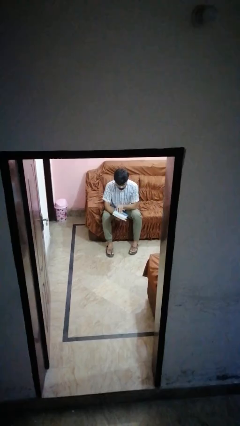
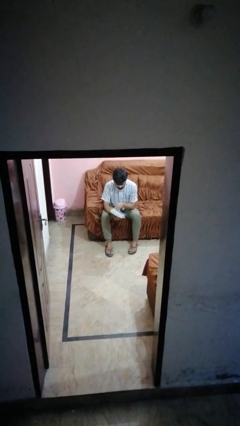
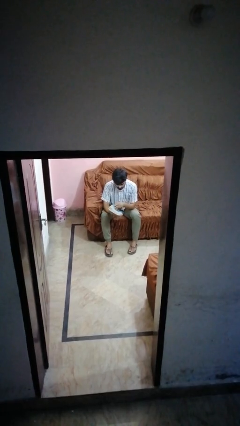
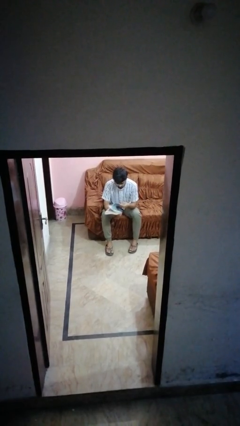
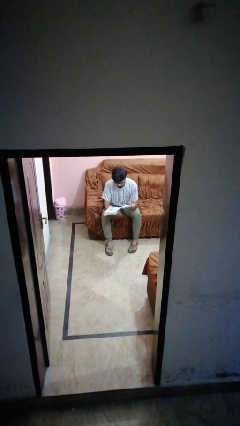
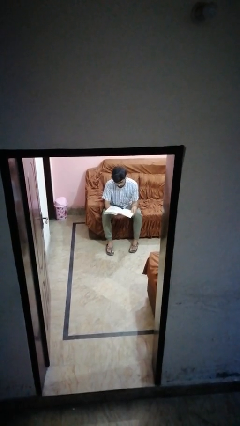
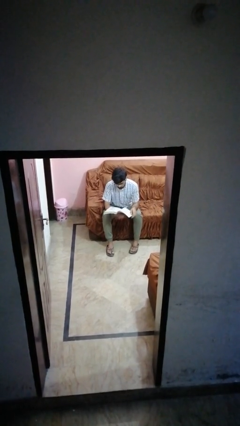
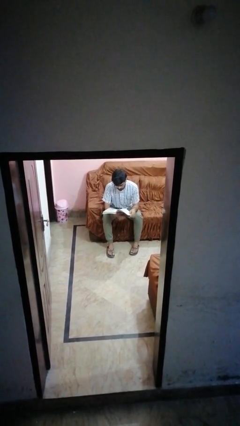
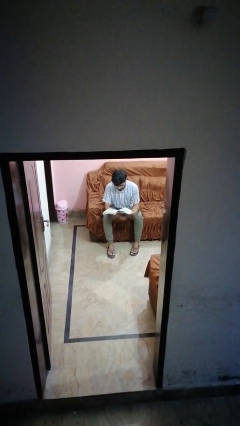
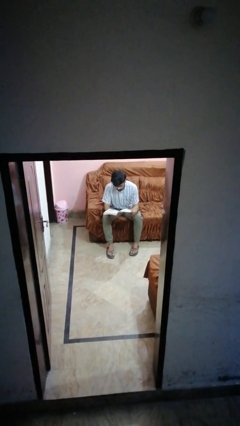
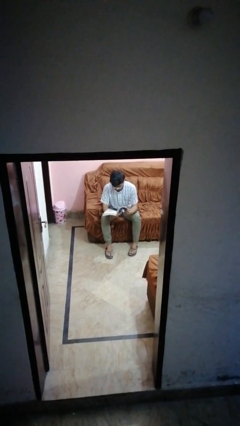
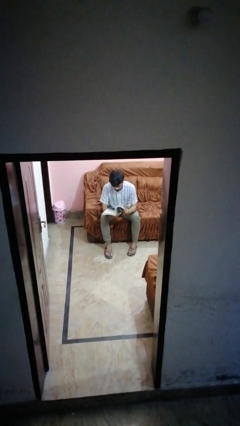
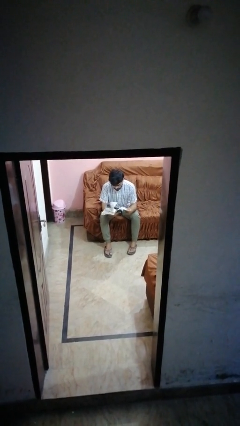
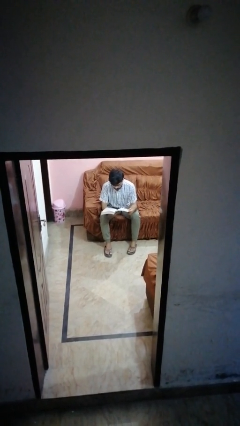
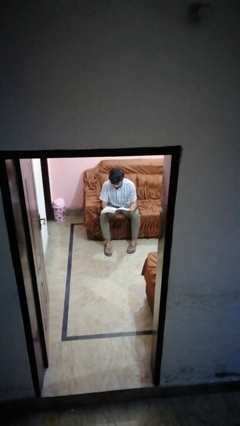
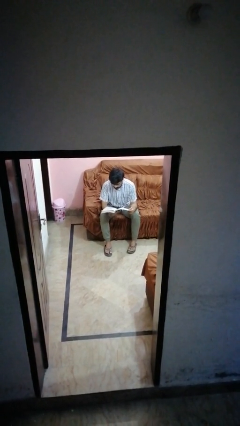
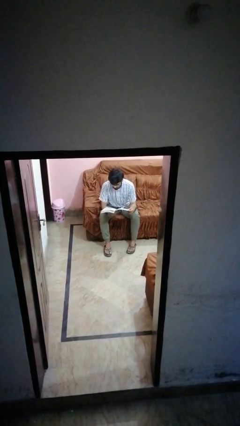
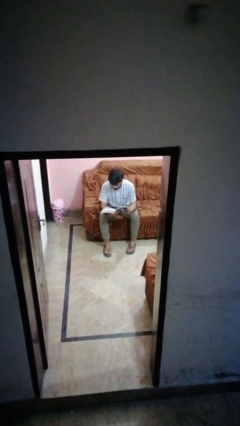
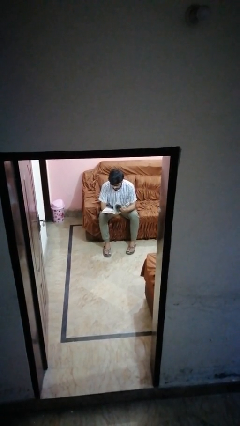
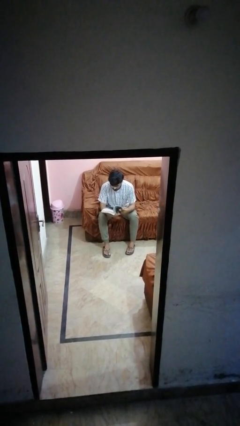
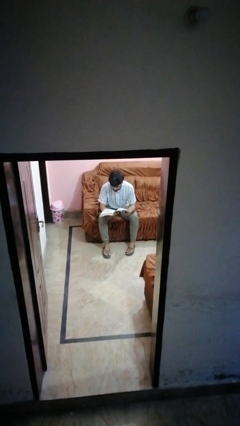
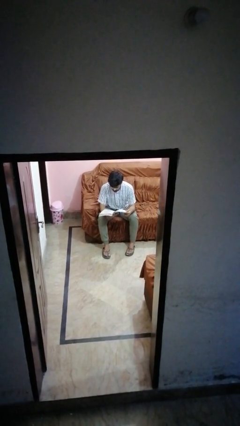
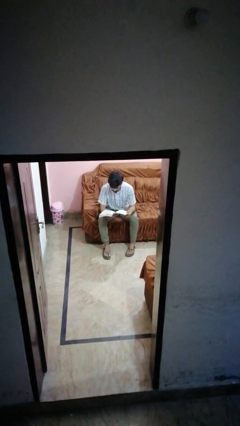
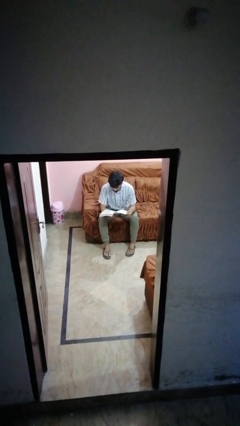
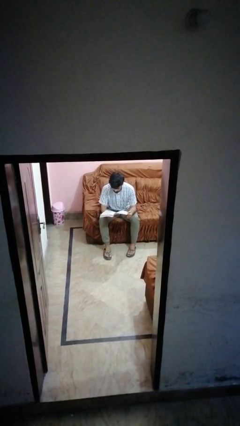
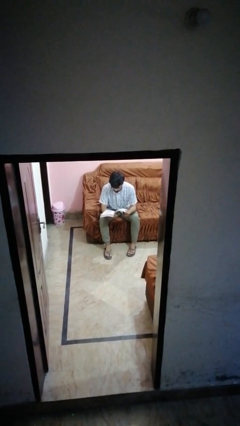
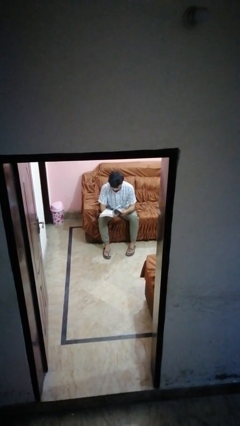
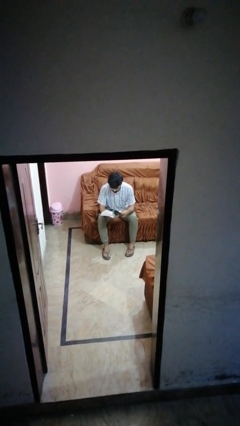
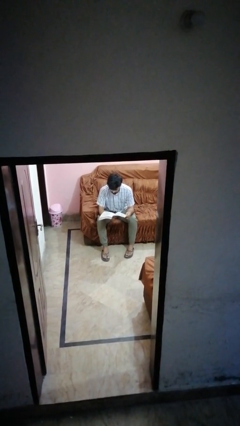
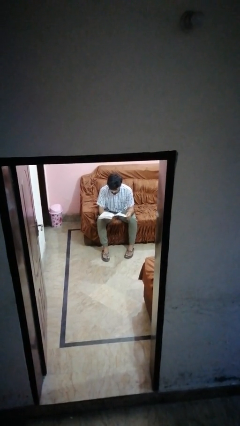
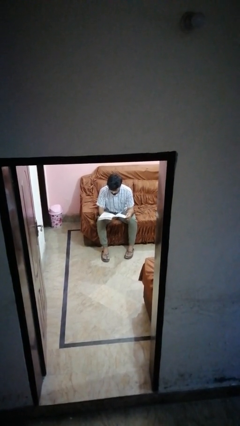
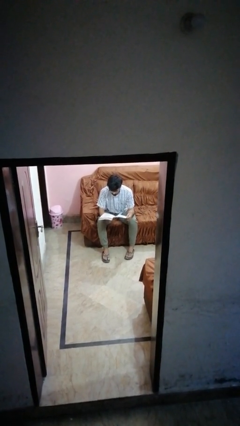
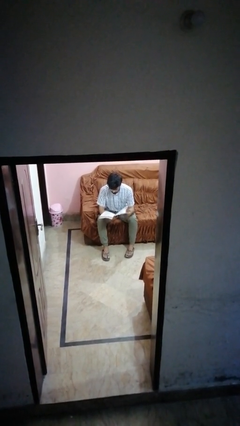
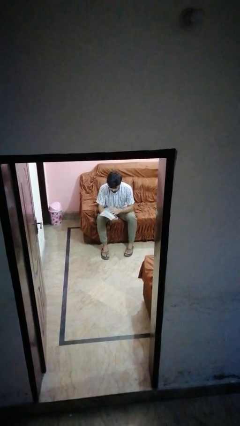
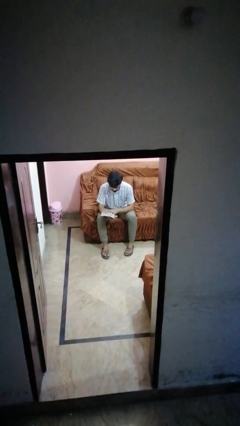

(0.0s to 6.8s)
person reads book

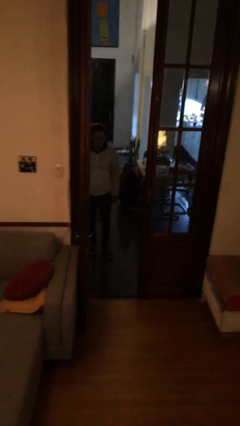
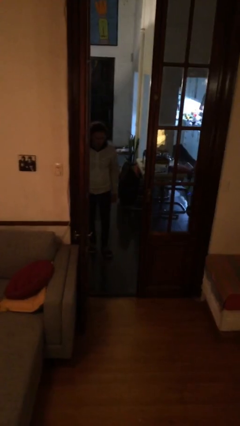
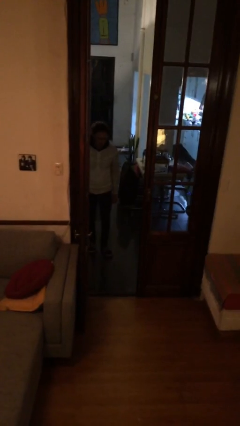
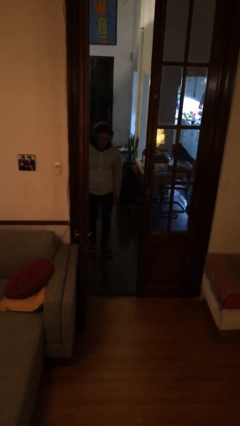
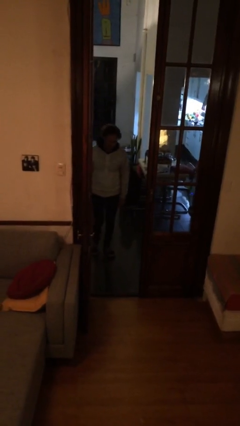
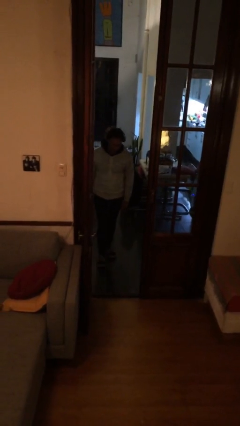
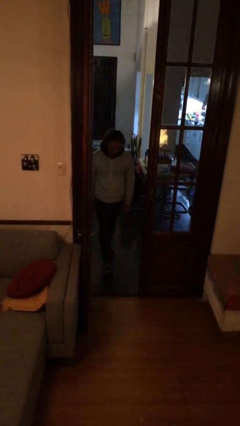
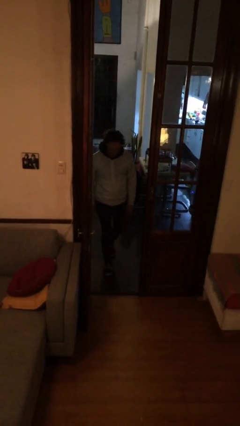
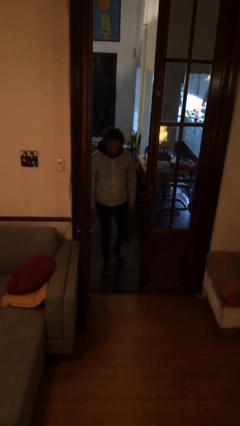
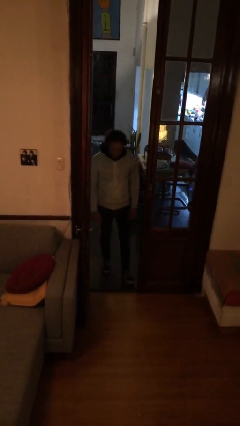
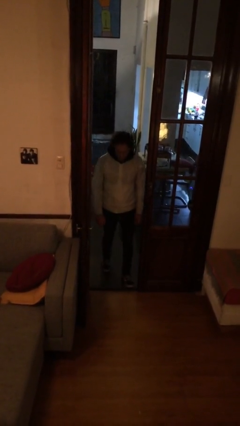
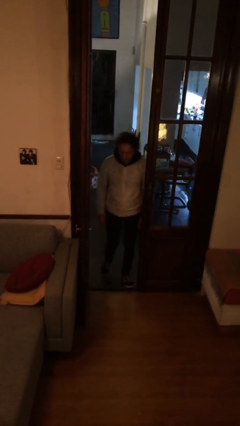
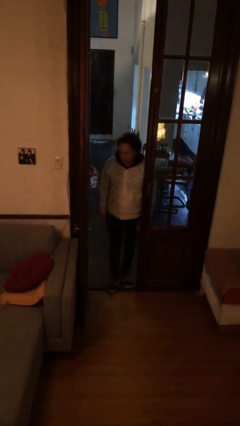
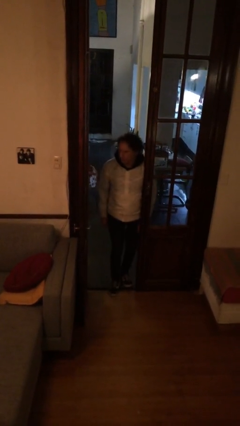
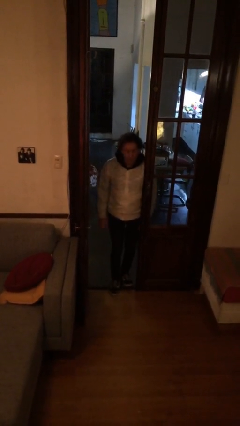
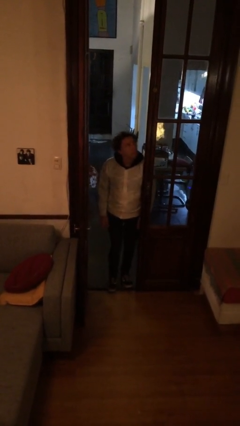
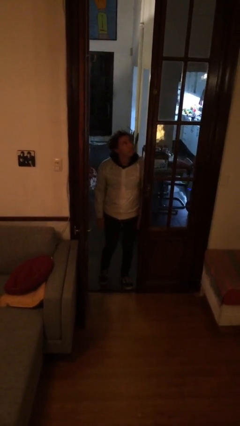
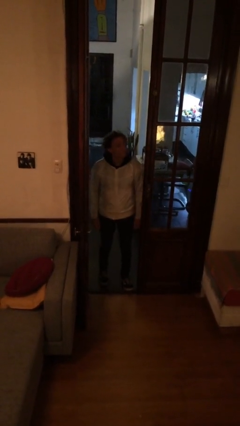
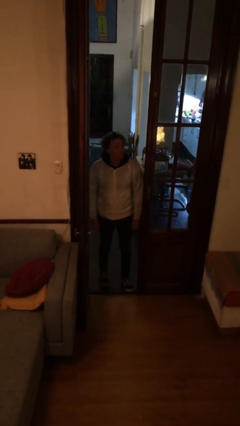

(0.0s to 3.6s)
person bumps into wall

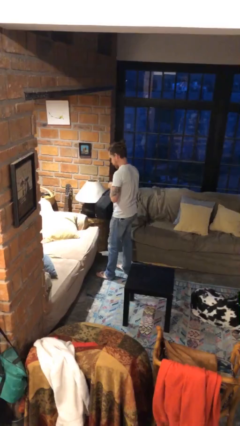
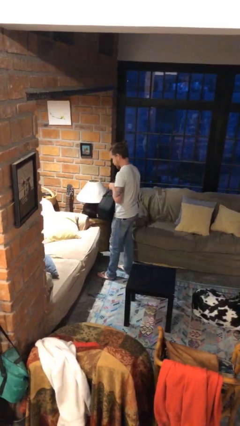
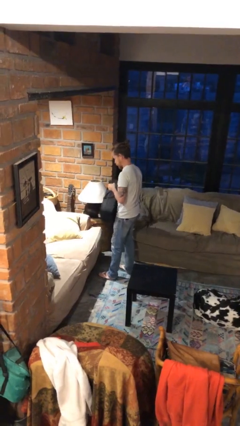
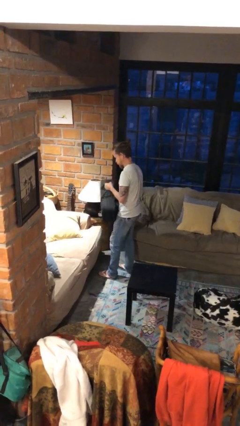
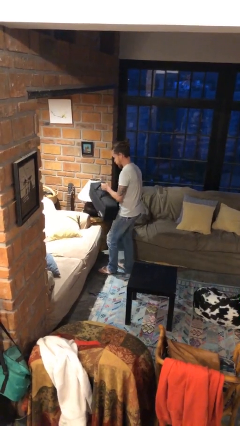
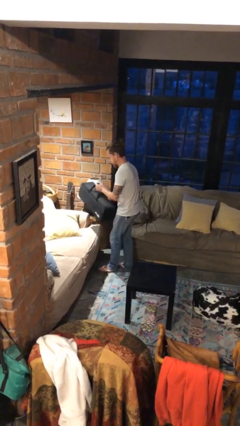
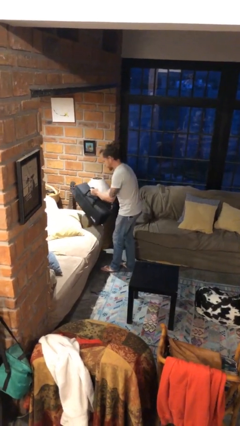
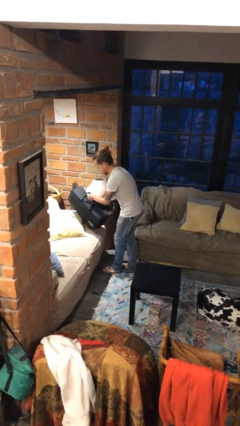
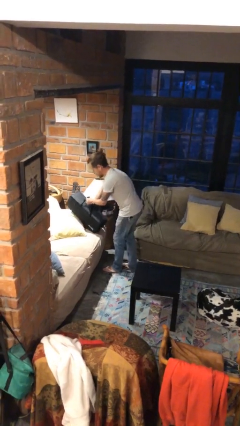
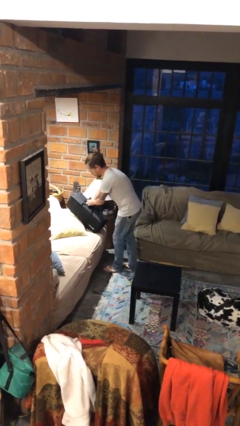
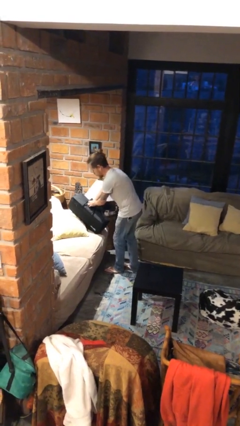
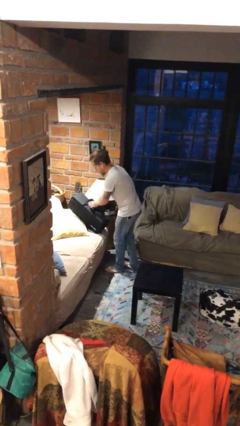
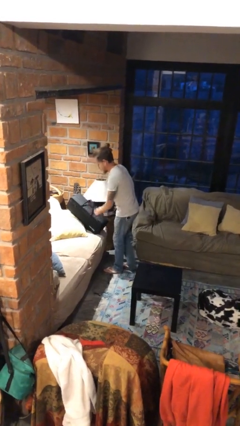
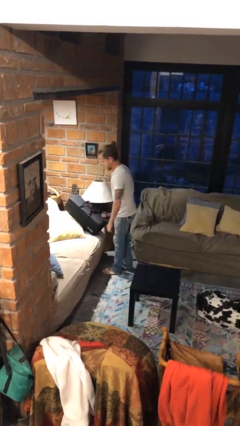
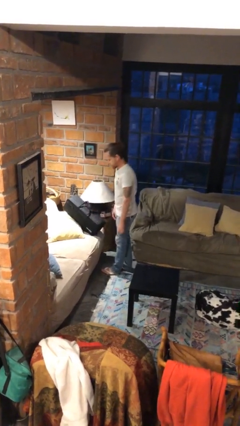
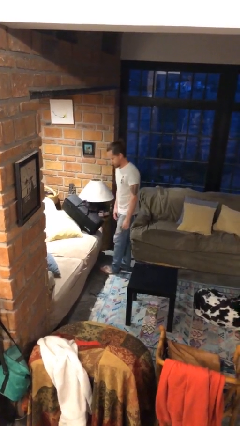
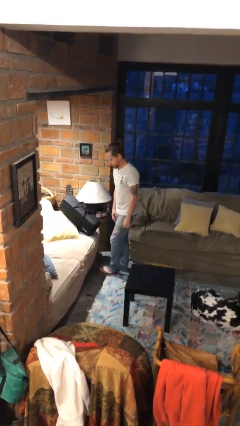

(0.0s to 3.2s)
person puts down object on couch

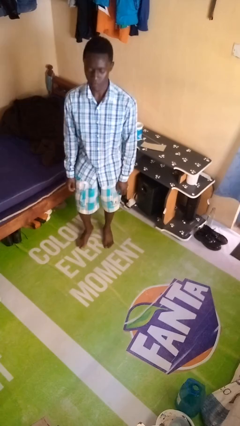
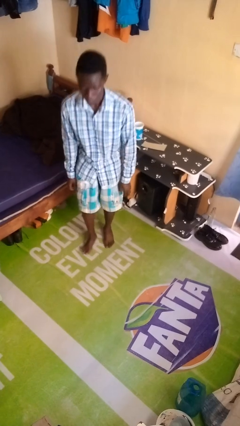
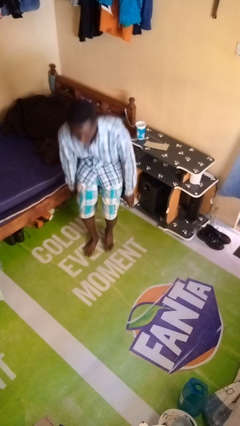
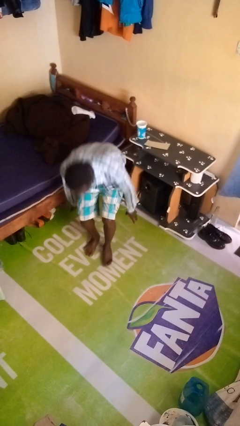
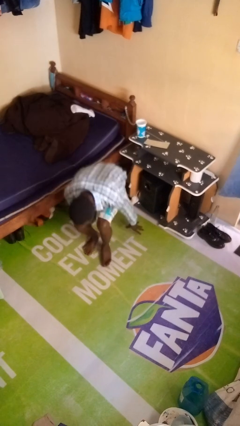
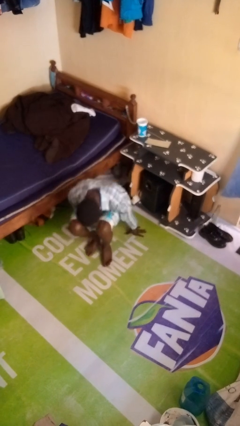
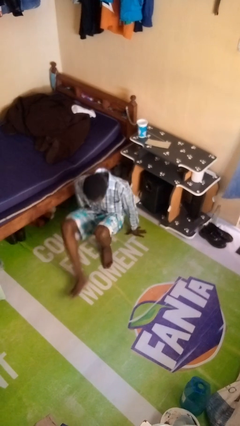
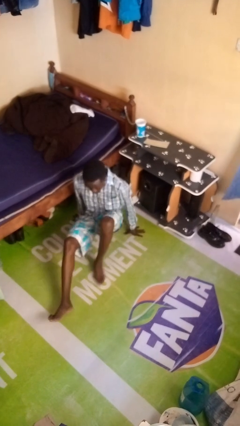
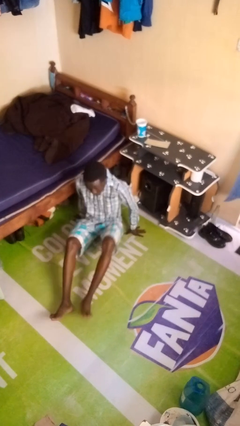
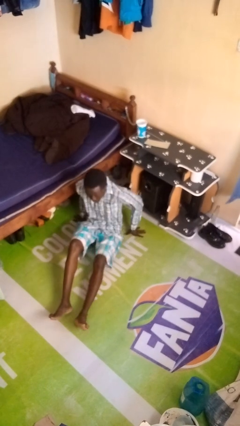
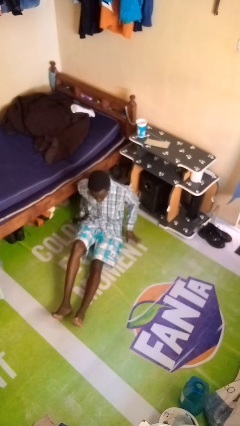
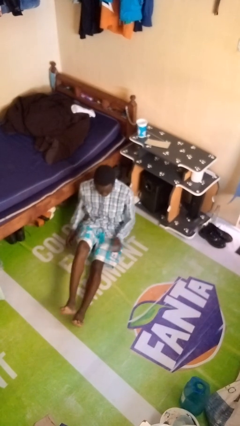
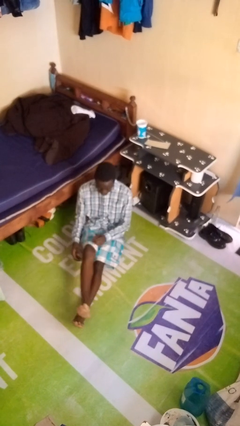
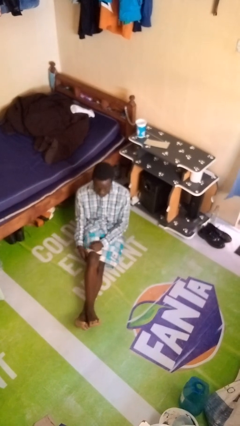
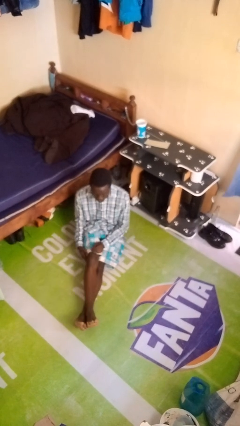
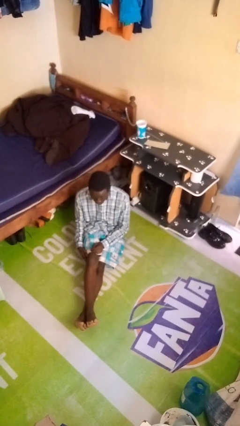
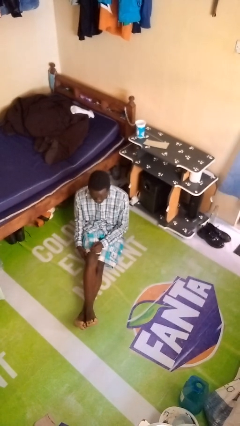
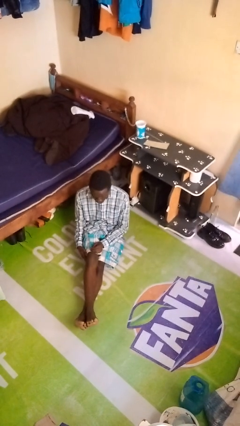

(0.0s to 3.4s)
person sits crisscross

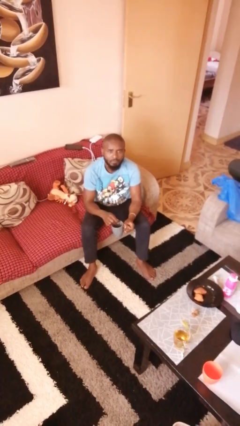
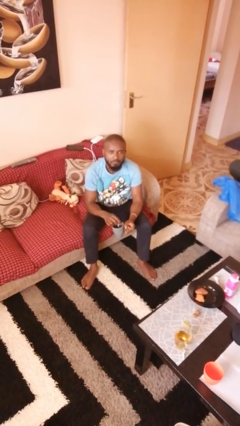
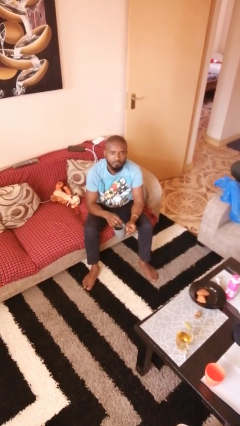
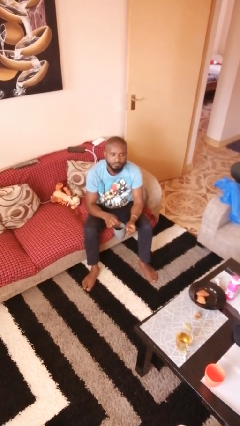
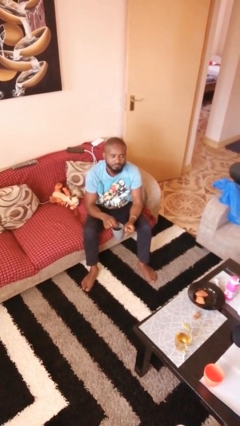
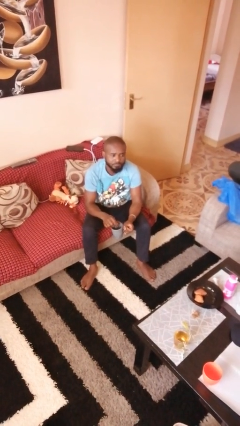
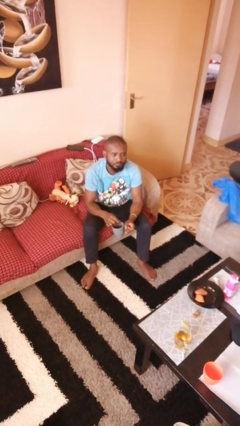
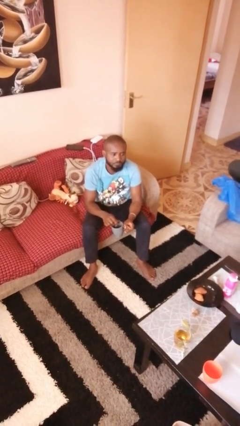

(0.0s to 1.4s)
person stirs mug
